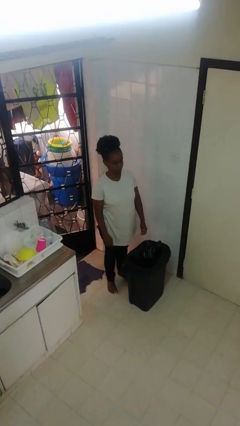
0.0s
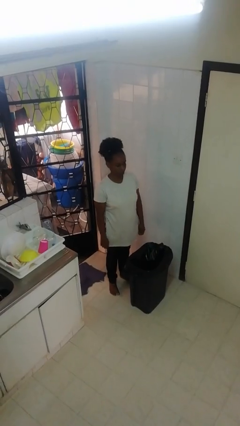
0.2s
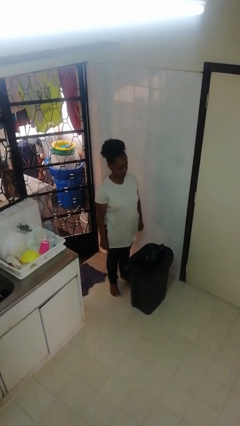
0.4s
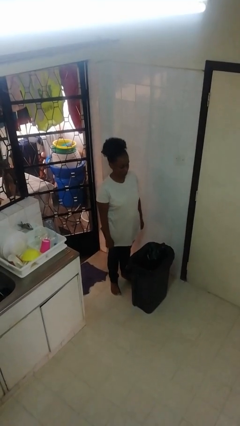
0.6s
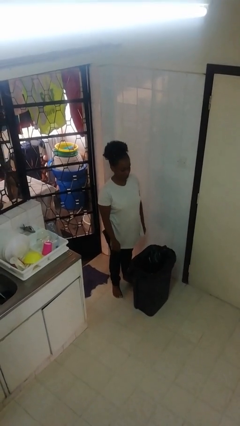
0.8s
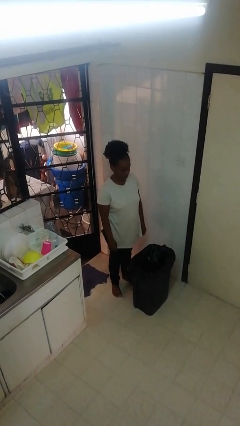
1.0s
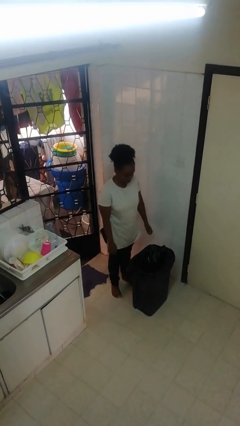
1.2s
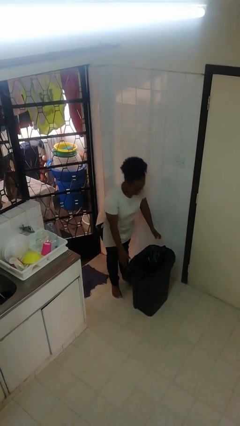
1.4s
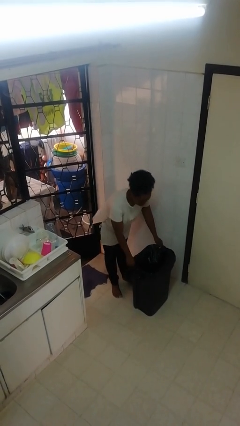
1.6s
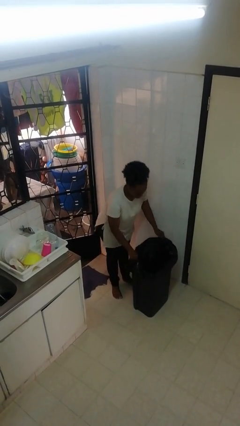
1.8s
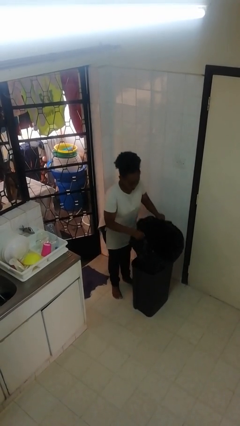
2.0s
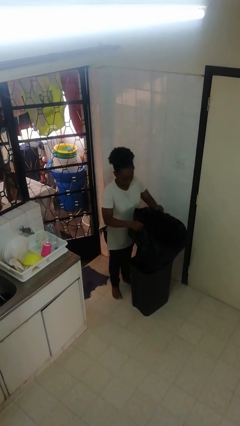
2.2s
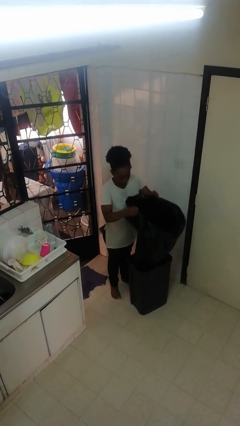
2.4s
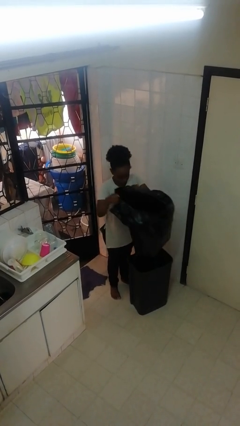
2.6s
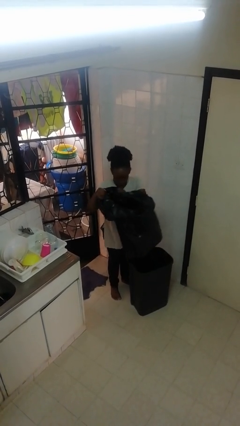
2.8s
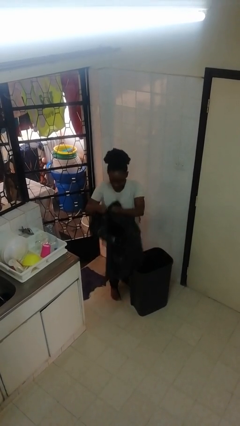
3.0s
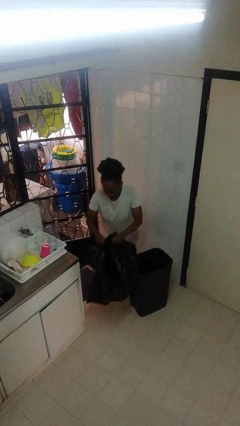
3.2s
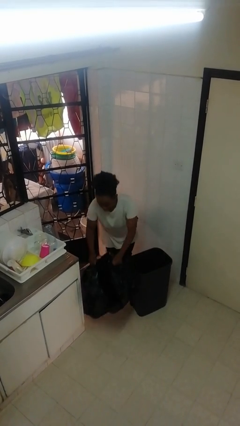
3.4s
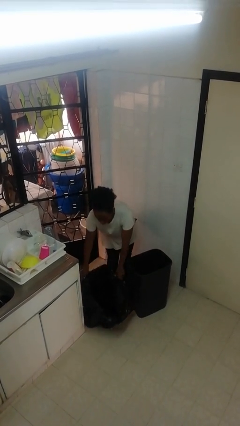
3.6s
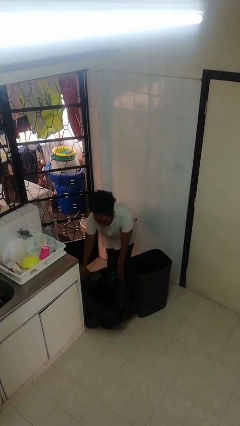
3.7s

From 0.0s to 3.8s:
person removes trashbag from trashcan

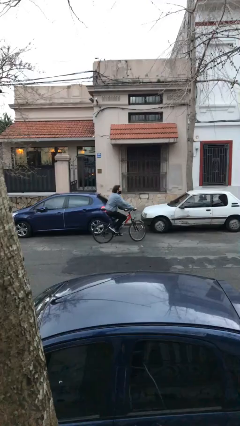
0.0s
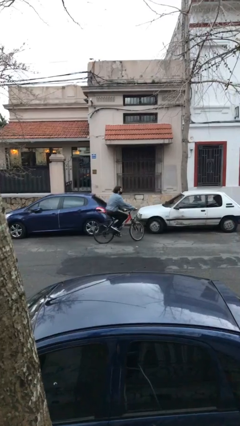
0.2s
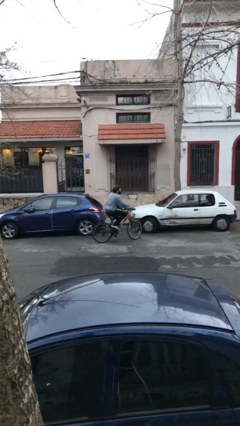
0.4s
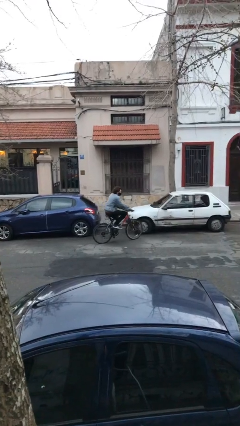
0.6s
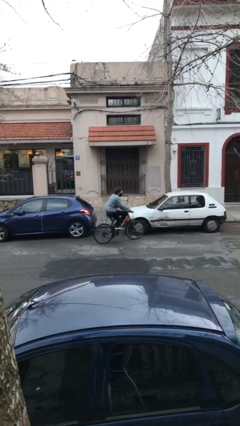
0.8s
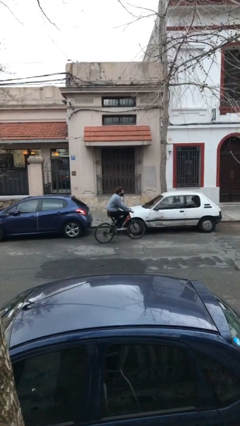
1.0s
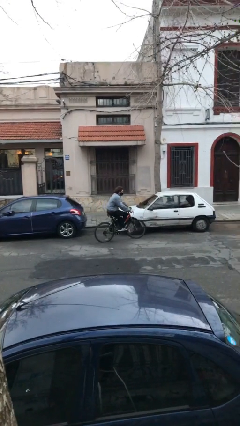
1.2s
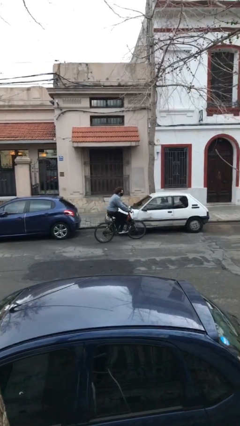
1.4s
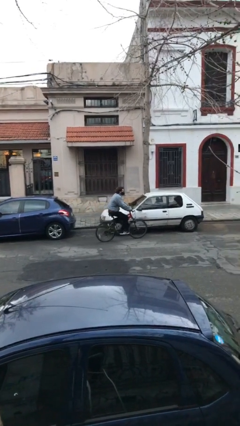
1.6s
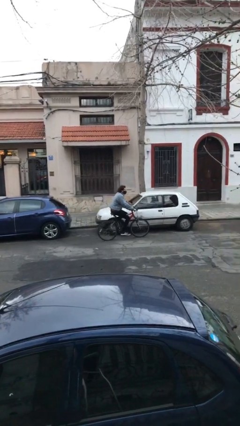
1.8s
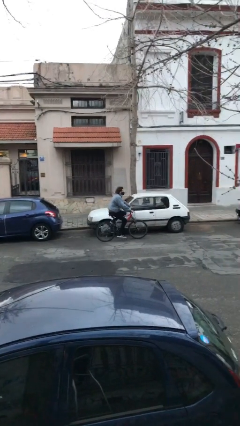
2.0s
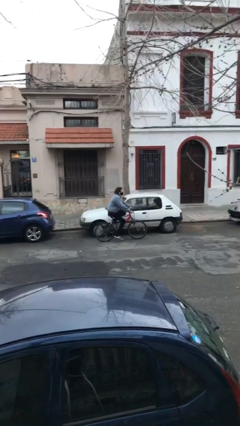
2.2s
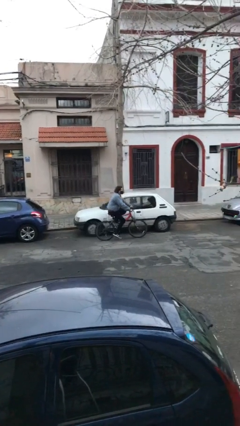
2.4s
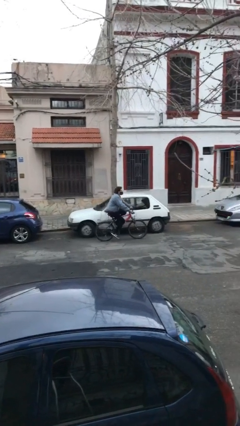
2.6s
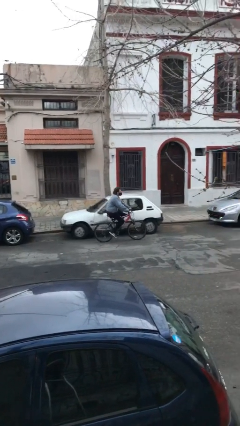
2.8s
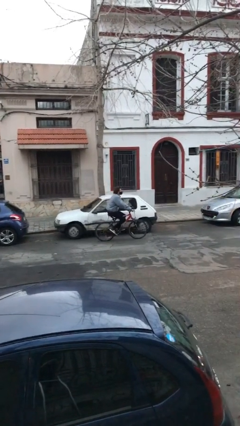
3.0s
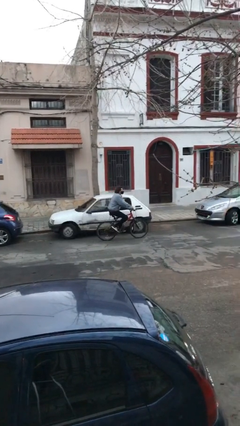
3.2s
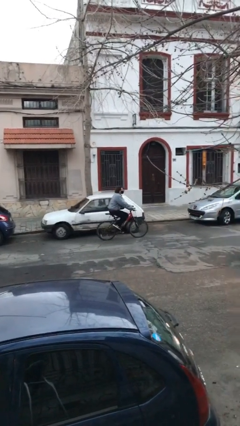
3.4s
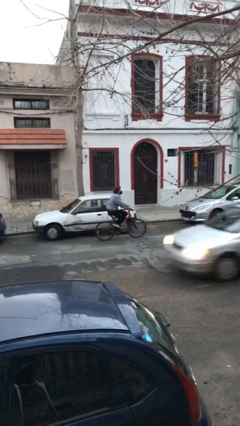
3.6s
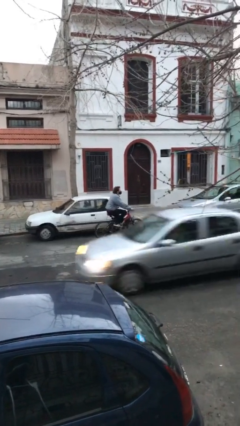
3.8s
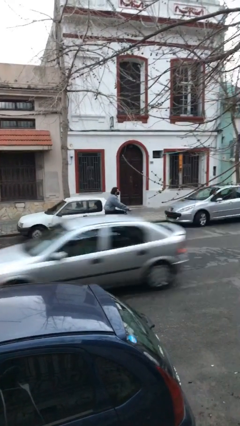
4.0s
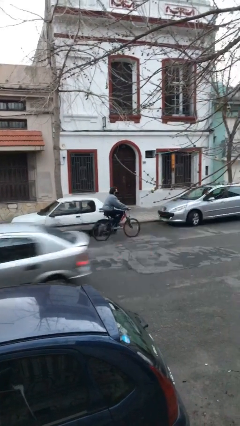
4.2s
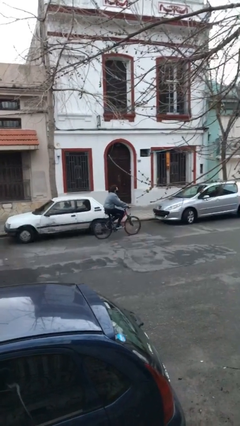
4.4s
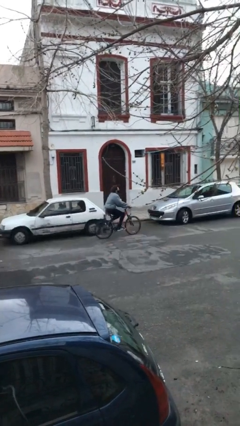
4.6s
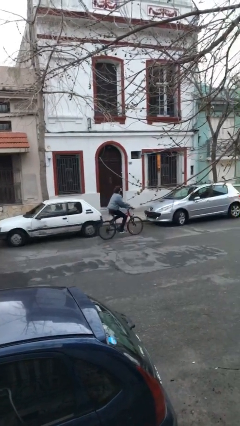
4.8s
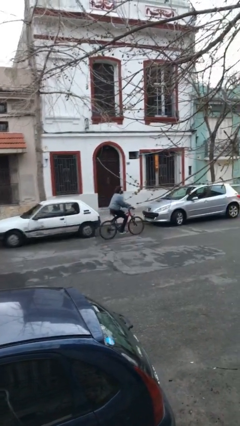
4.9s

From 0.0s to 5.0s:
person rides bicycle

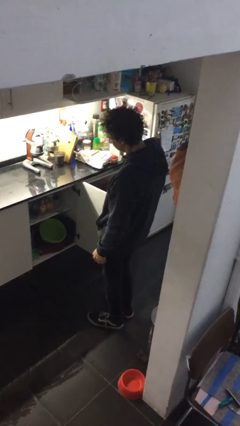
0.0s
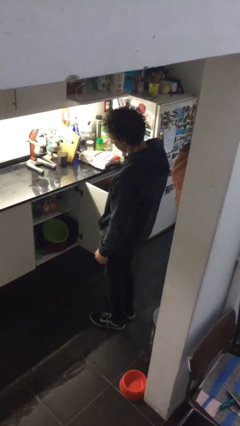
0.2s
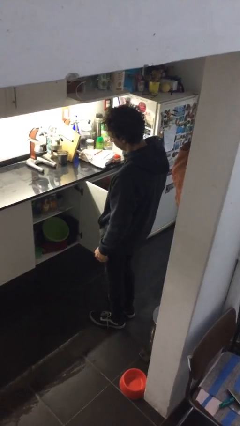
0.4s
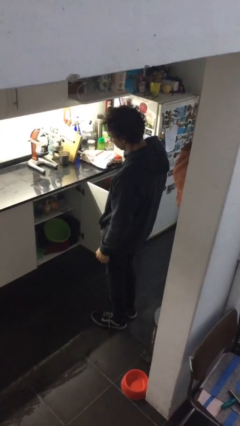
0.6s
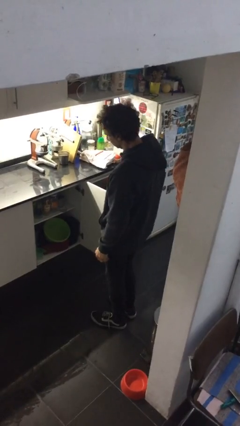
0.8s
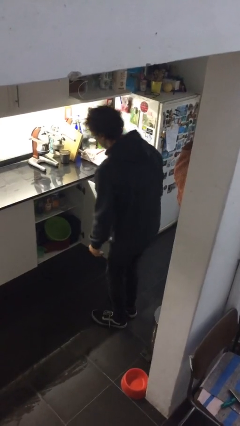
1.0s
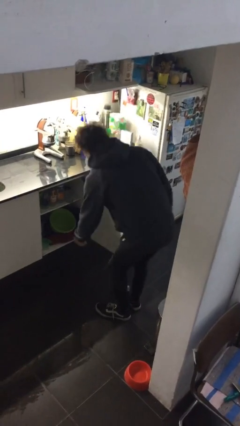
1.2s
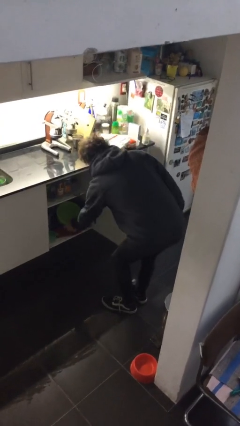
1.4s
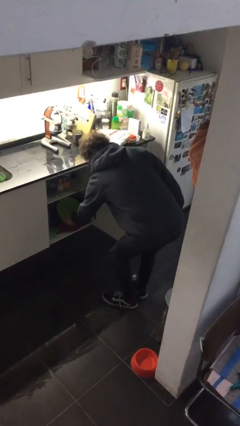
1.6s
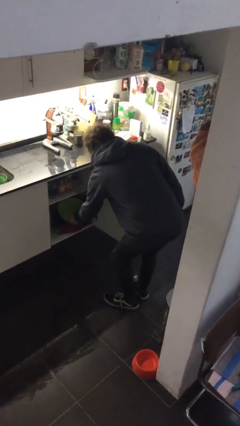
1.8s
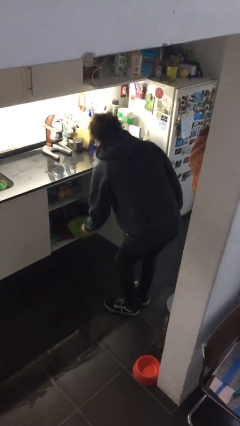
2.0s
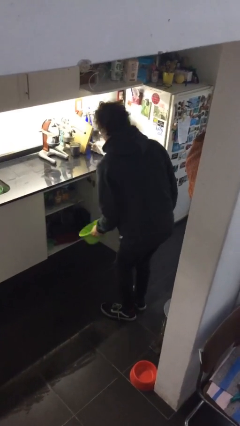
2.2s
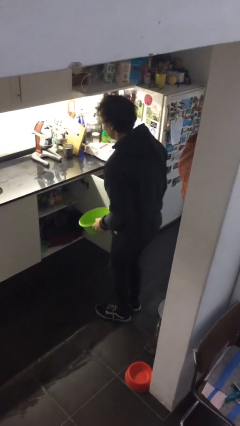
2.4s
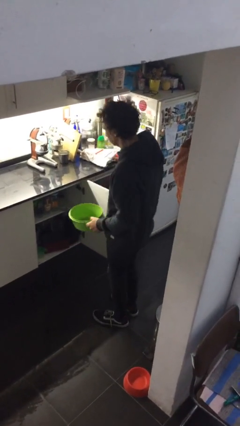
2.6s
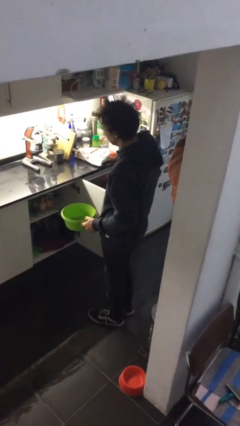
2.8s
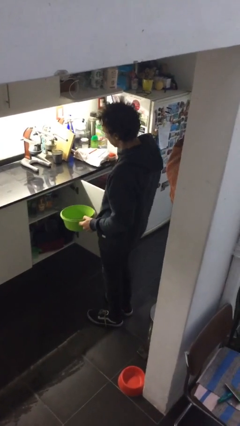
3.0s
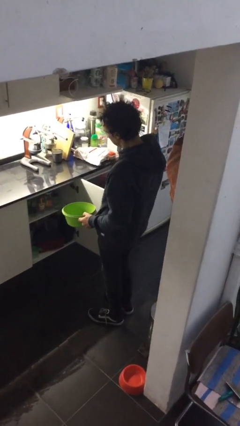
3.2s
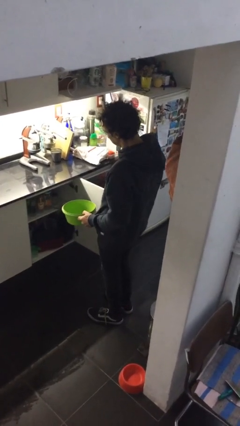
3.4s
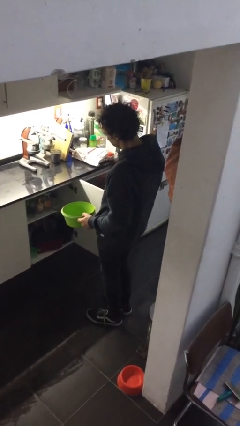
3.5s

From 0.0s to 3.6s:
person picks up object from cabinet

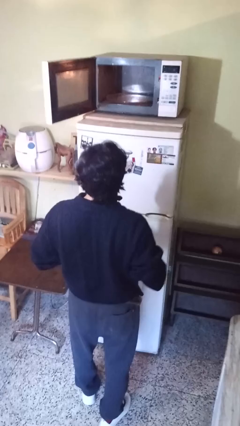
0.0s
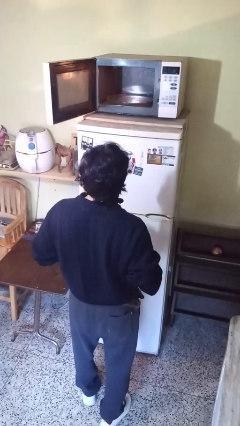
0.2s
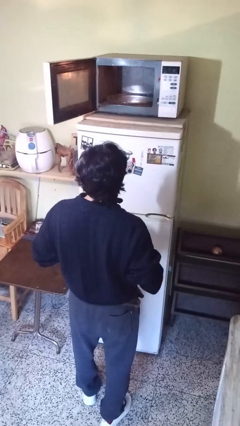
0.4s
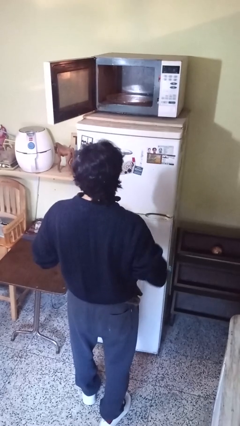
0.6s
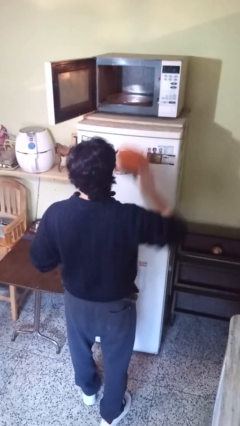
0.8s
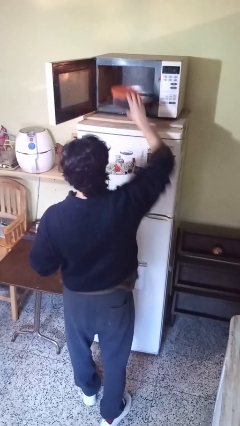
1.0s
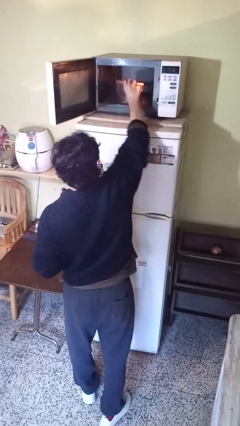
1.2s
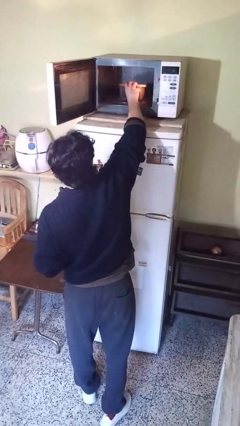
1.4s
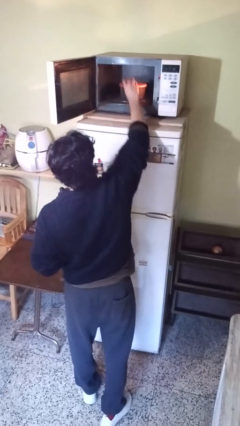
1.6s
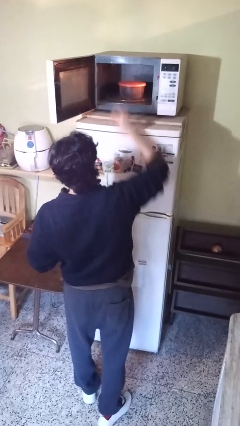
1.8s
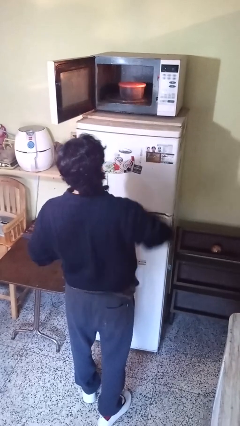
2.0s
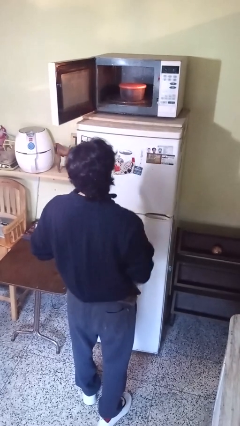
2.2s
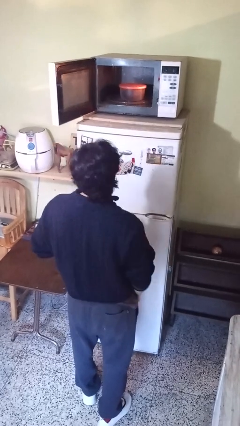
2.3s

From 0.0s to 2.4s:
person puts object into microwave

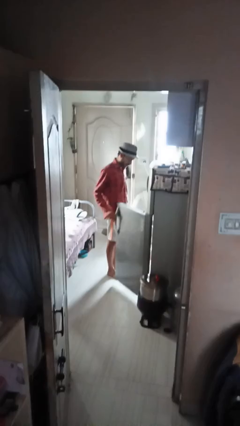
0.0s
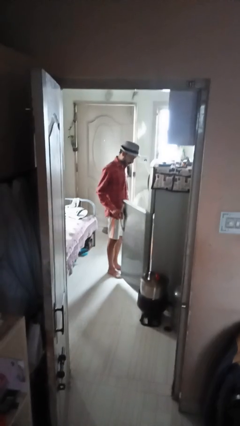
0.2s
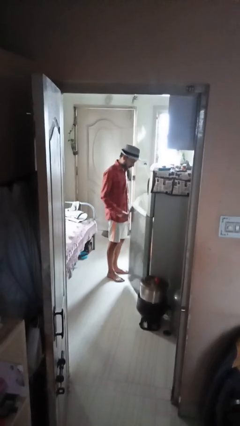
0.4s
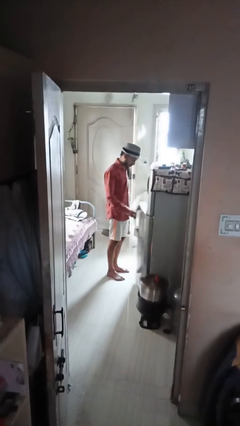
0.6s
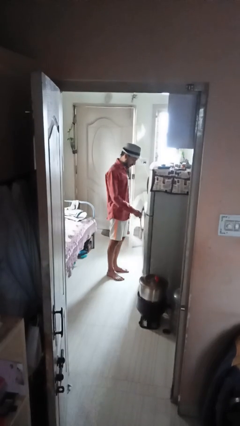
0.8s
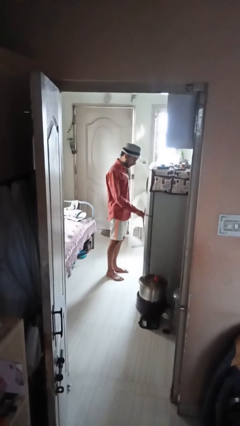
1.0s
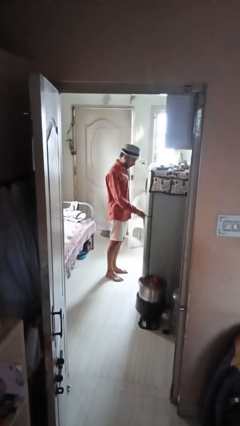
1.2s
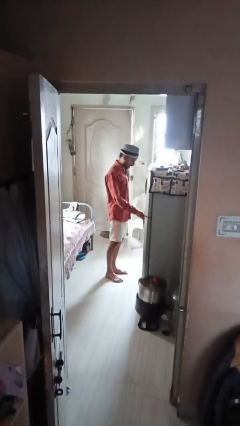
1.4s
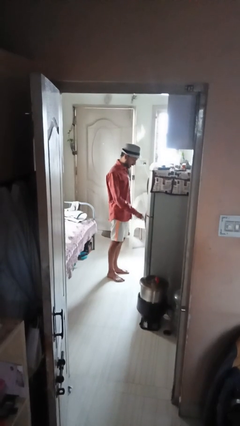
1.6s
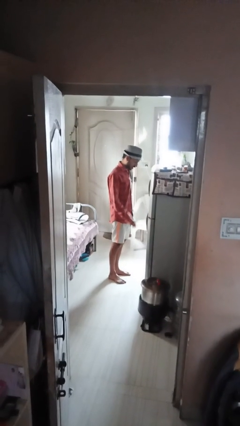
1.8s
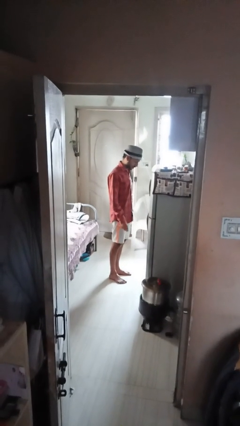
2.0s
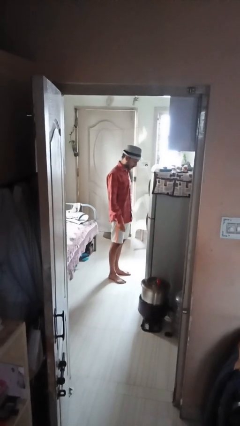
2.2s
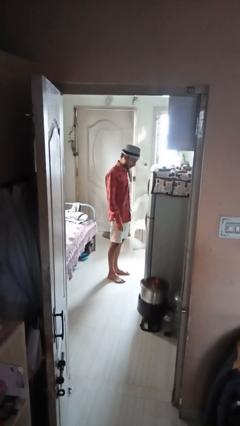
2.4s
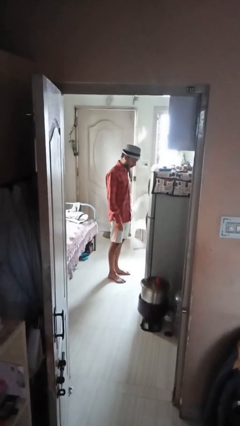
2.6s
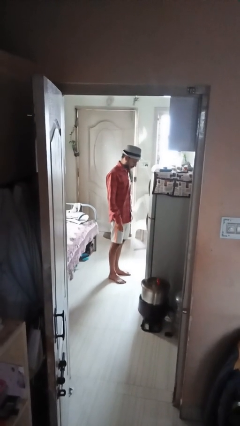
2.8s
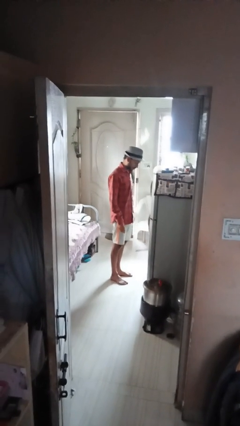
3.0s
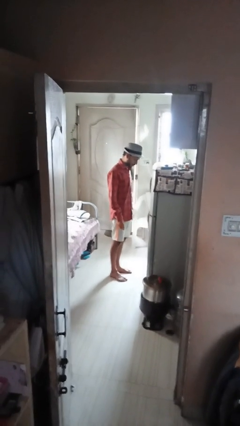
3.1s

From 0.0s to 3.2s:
person closes refrigerator
